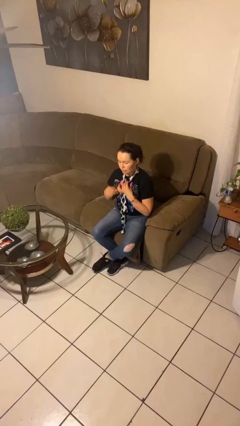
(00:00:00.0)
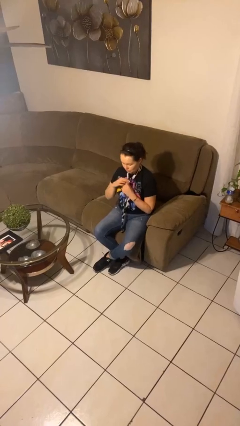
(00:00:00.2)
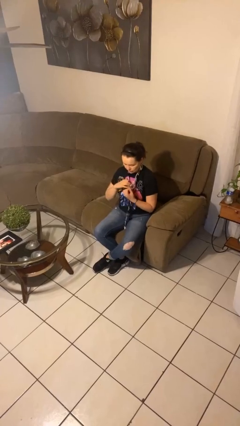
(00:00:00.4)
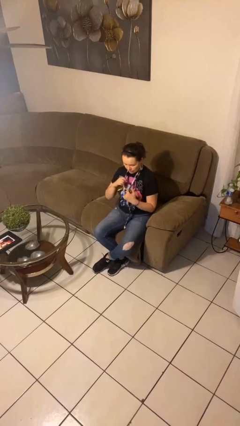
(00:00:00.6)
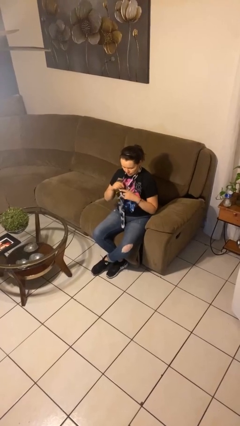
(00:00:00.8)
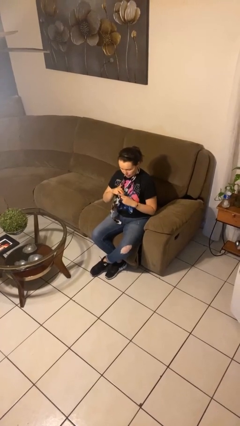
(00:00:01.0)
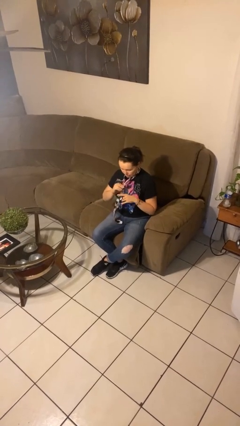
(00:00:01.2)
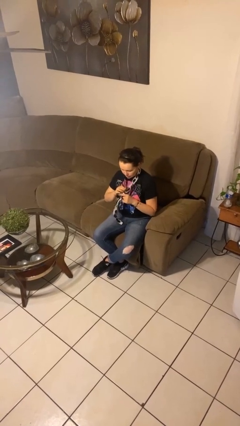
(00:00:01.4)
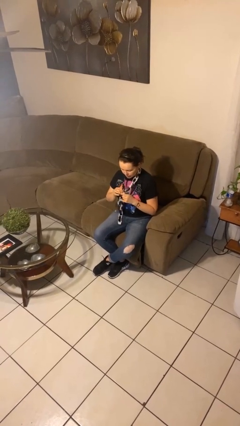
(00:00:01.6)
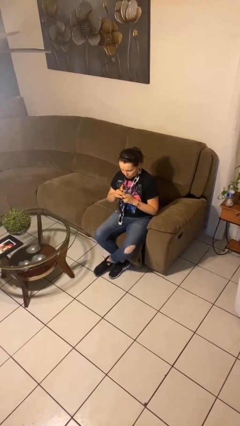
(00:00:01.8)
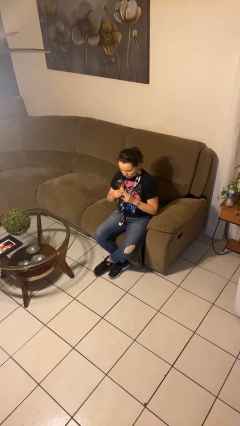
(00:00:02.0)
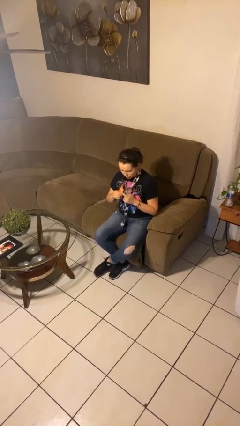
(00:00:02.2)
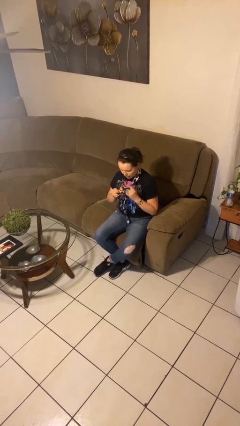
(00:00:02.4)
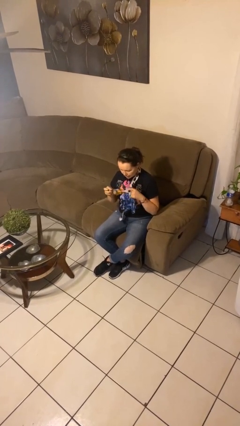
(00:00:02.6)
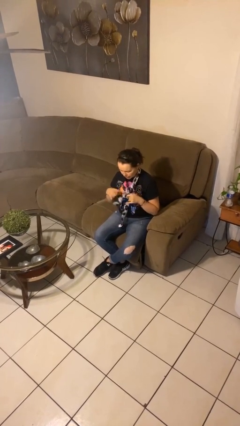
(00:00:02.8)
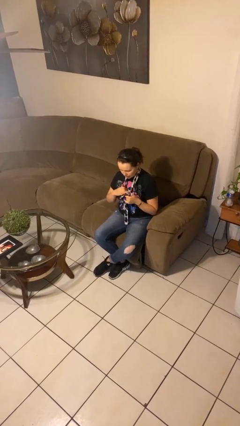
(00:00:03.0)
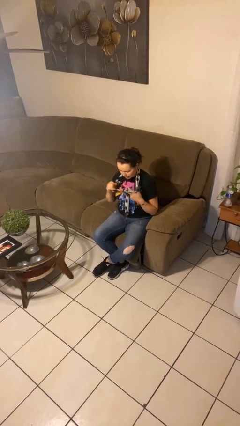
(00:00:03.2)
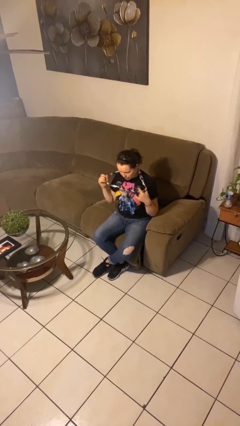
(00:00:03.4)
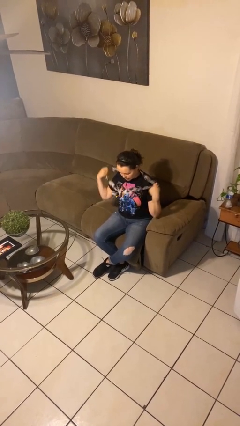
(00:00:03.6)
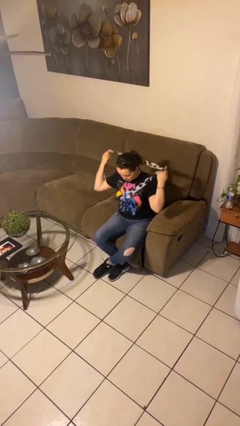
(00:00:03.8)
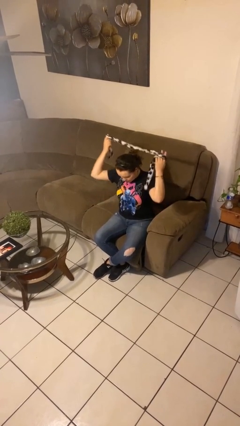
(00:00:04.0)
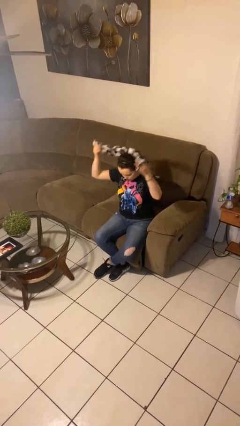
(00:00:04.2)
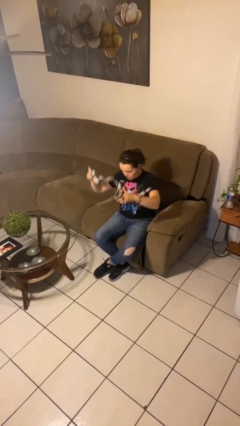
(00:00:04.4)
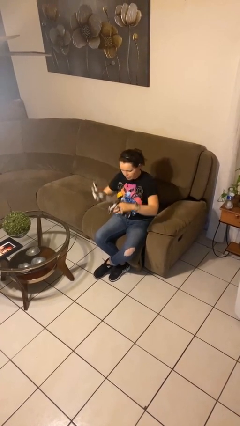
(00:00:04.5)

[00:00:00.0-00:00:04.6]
person takes off necktie

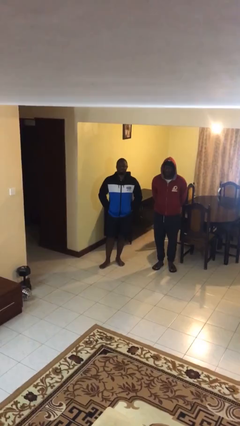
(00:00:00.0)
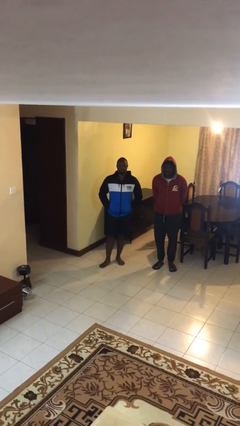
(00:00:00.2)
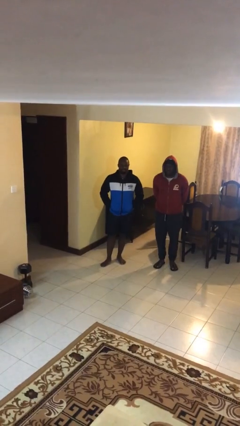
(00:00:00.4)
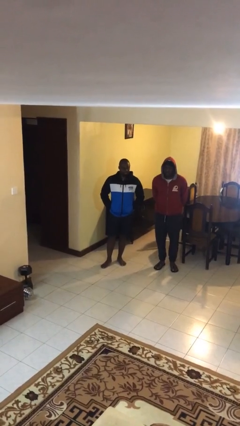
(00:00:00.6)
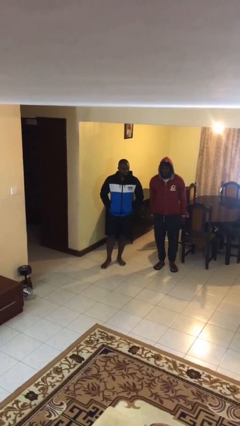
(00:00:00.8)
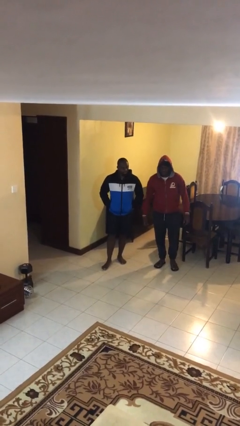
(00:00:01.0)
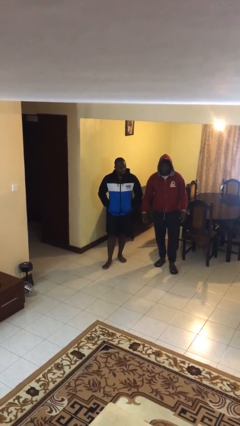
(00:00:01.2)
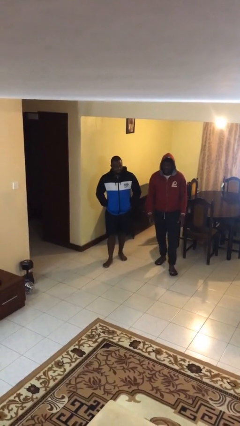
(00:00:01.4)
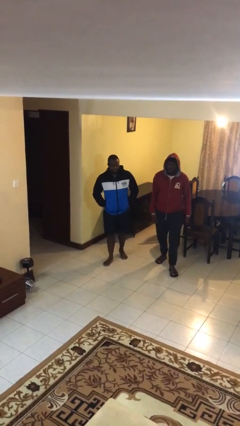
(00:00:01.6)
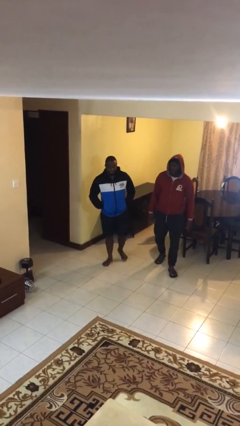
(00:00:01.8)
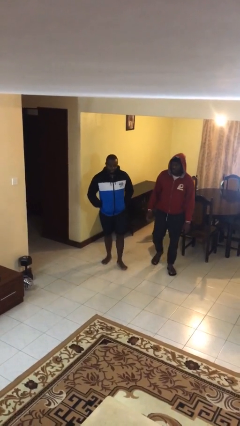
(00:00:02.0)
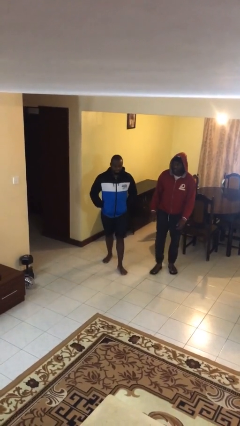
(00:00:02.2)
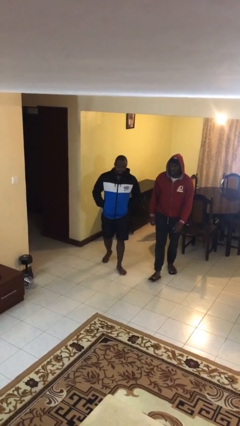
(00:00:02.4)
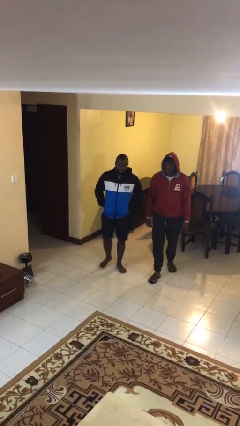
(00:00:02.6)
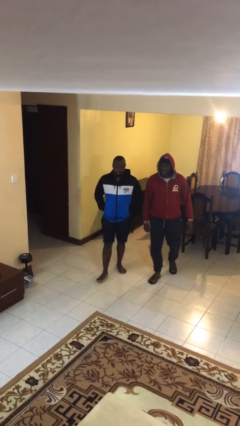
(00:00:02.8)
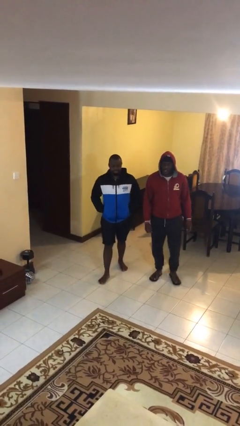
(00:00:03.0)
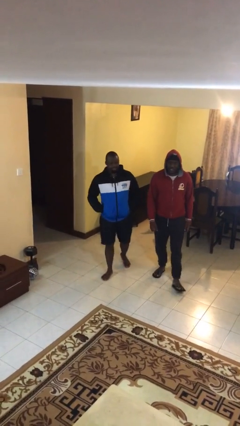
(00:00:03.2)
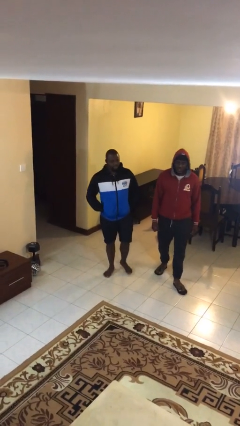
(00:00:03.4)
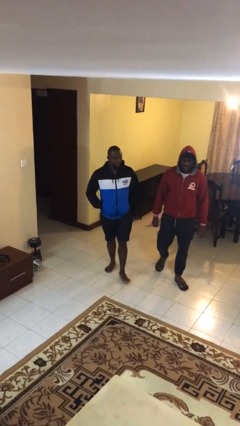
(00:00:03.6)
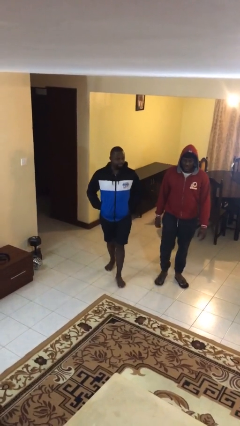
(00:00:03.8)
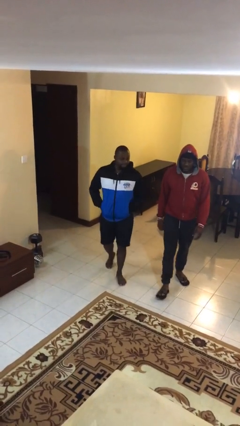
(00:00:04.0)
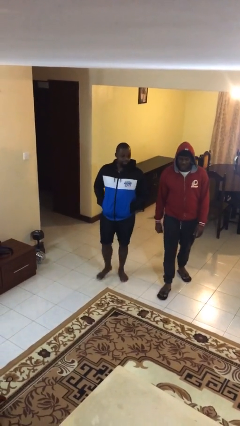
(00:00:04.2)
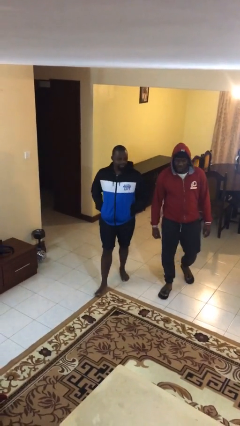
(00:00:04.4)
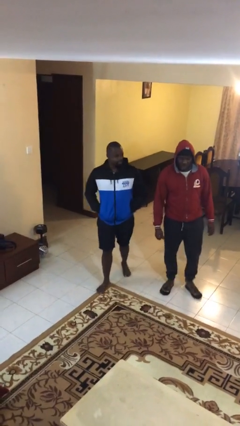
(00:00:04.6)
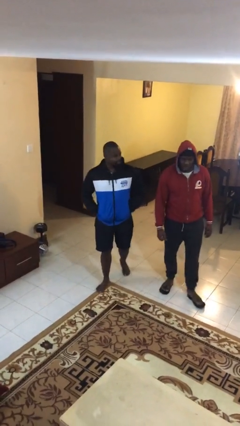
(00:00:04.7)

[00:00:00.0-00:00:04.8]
person talks to person

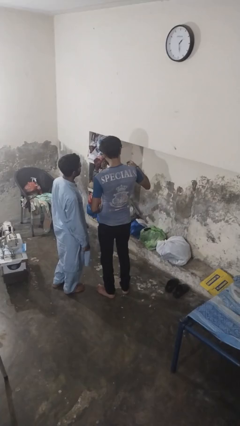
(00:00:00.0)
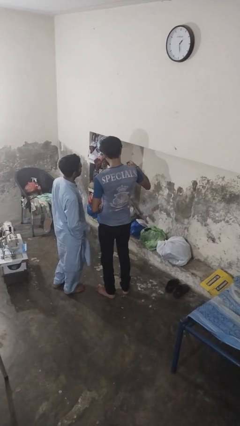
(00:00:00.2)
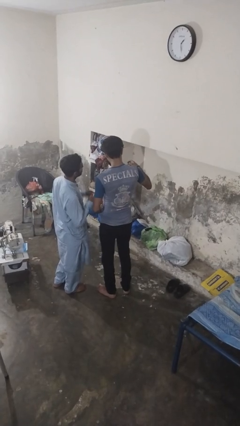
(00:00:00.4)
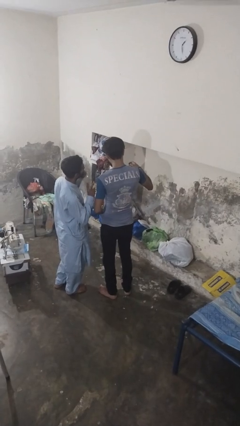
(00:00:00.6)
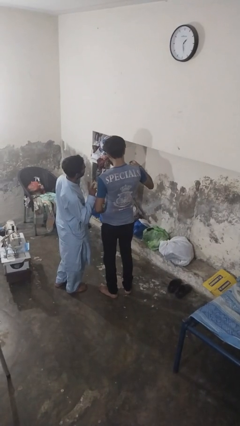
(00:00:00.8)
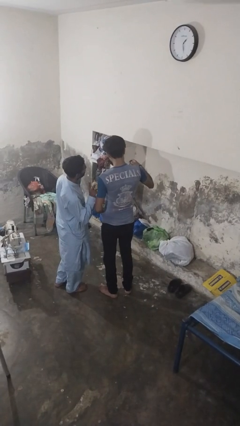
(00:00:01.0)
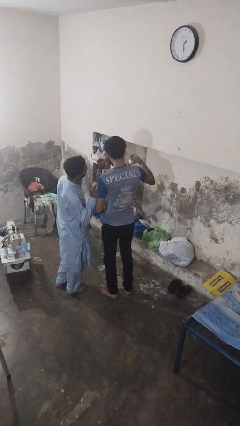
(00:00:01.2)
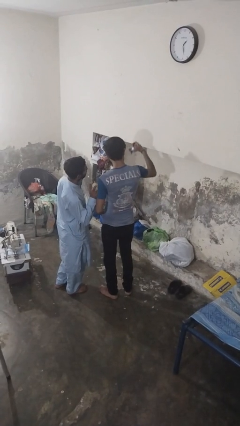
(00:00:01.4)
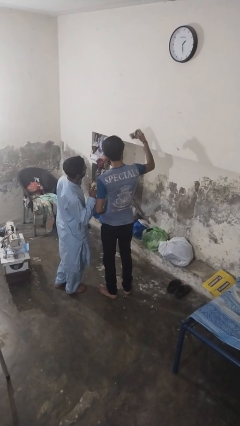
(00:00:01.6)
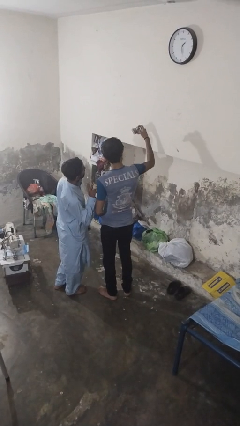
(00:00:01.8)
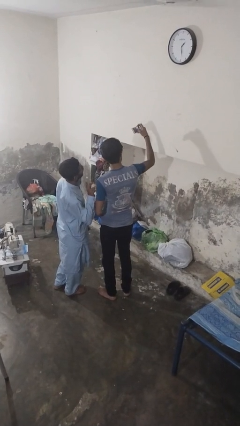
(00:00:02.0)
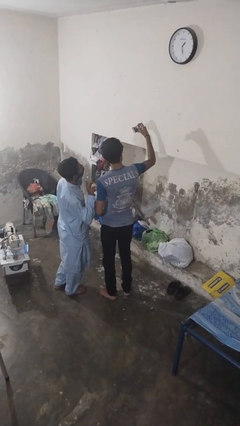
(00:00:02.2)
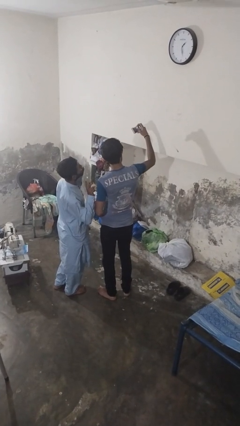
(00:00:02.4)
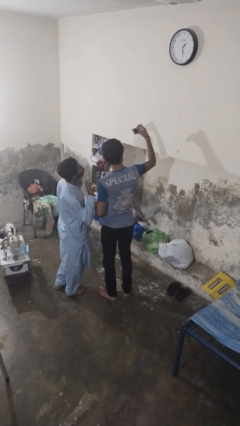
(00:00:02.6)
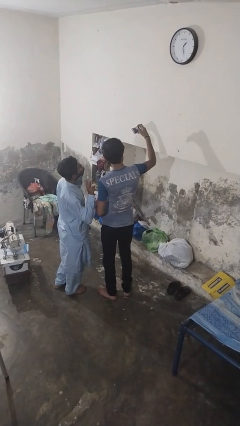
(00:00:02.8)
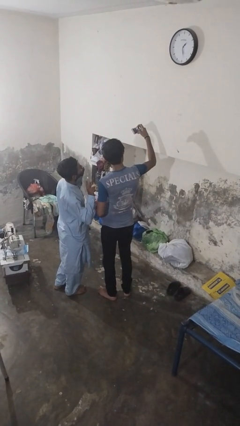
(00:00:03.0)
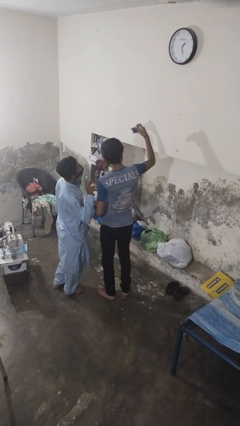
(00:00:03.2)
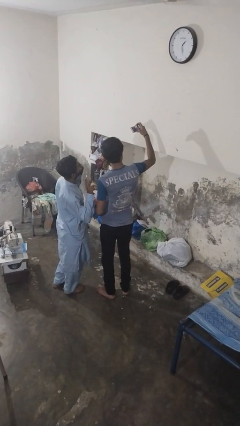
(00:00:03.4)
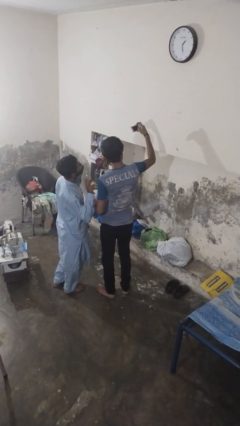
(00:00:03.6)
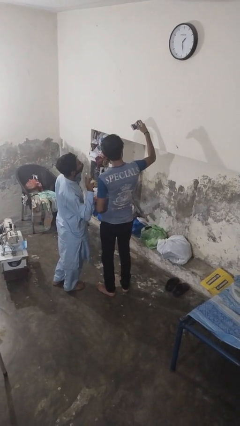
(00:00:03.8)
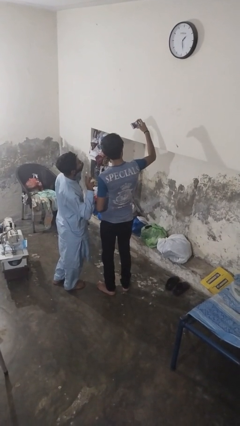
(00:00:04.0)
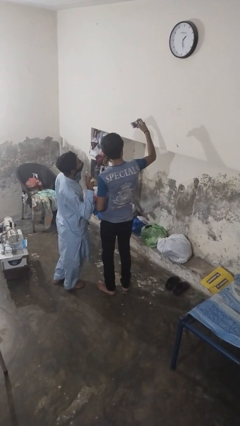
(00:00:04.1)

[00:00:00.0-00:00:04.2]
person takes selfie with person

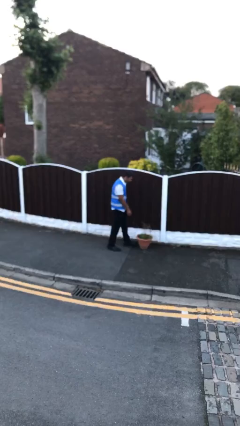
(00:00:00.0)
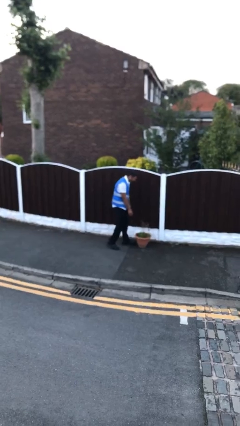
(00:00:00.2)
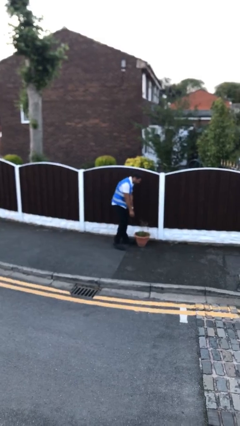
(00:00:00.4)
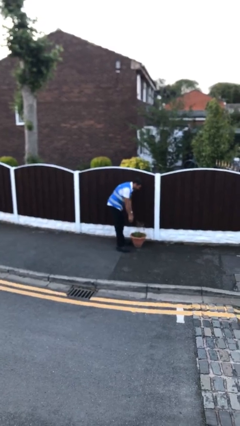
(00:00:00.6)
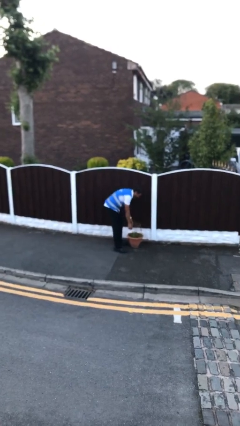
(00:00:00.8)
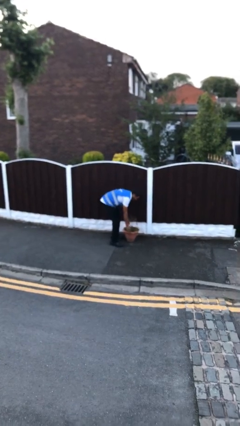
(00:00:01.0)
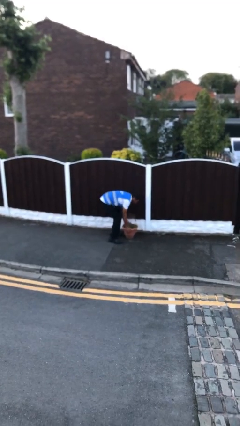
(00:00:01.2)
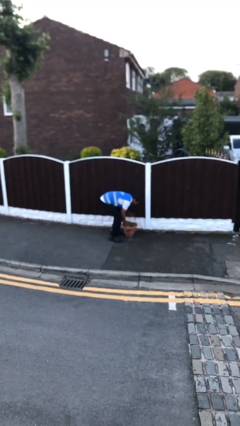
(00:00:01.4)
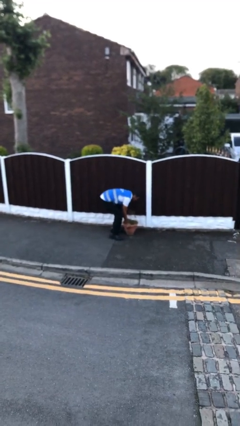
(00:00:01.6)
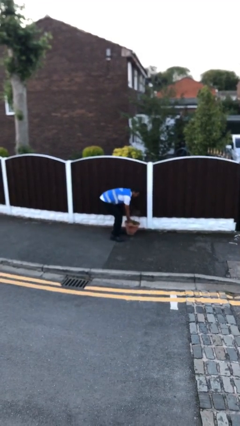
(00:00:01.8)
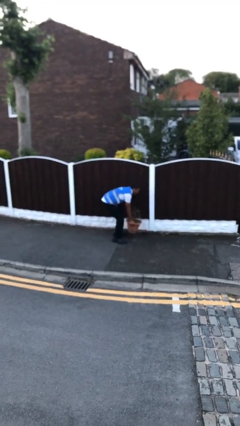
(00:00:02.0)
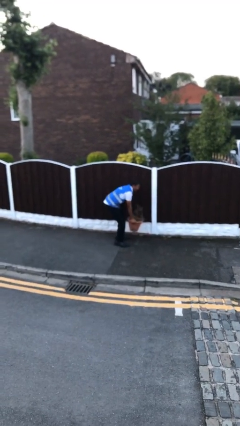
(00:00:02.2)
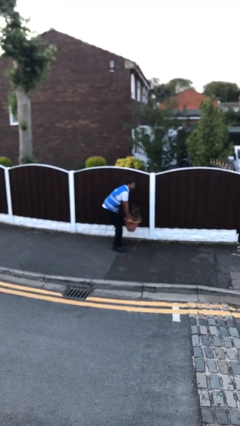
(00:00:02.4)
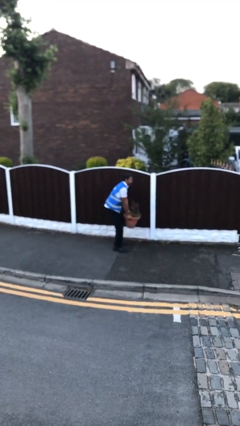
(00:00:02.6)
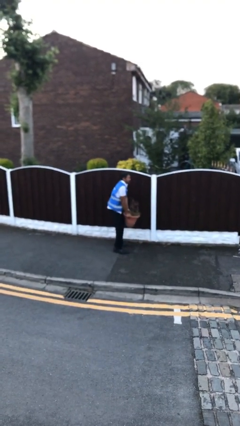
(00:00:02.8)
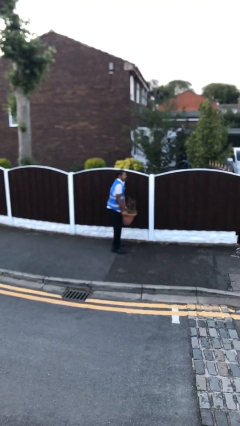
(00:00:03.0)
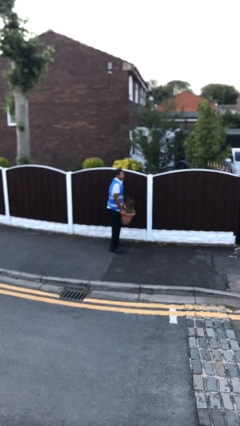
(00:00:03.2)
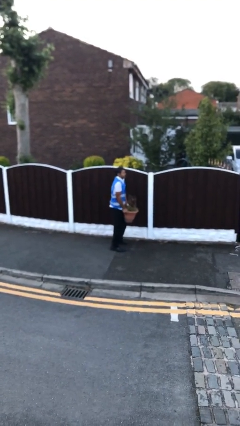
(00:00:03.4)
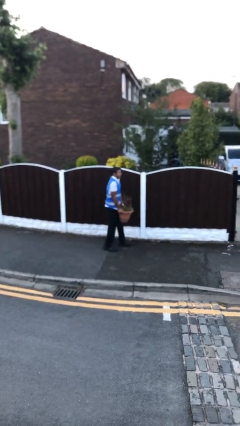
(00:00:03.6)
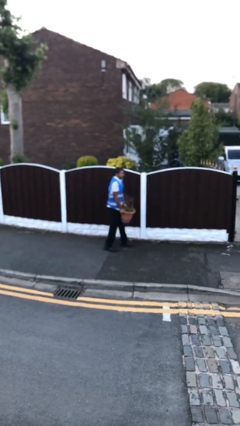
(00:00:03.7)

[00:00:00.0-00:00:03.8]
person picks up object from floor
